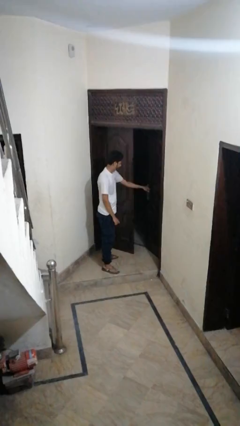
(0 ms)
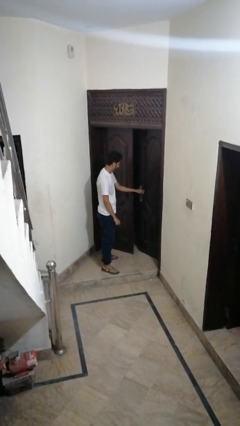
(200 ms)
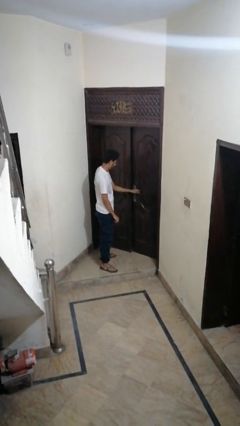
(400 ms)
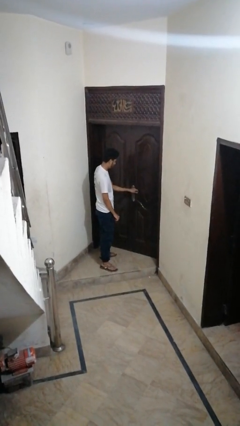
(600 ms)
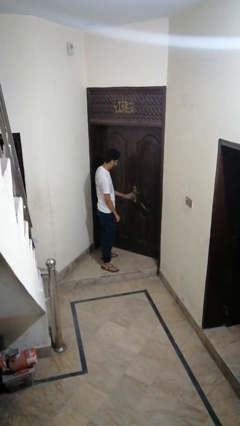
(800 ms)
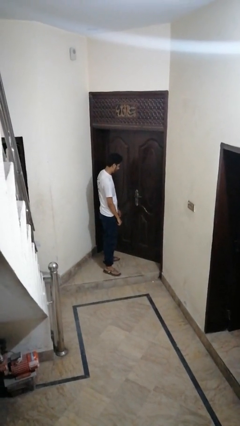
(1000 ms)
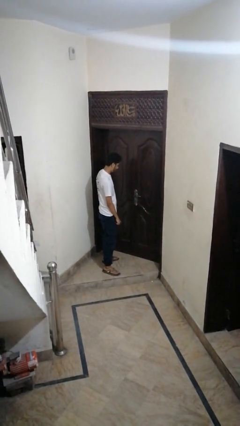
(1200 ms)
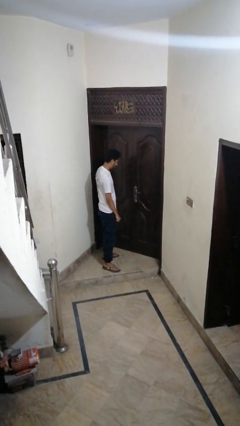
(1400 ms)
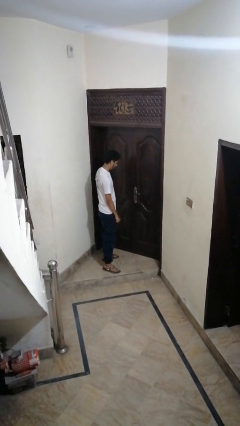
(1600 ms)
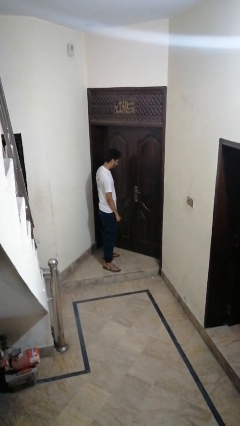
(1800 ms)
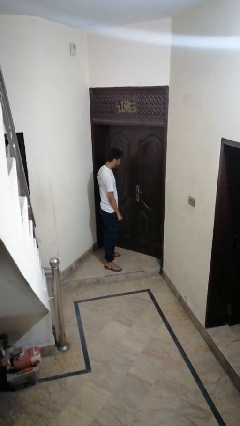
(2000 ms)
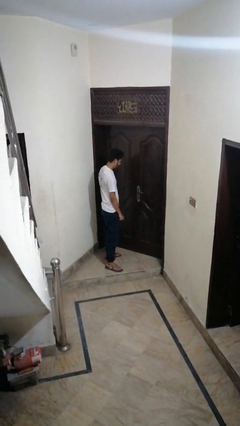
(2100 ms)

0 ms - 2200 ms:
person closes facility door

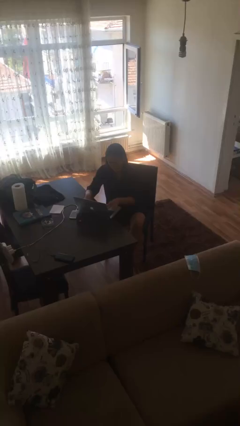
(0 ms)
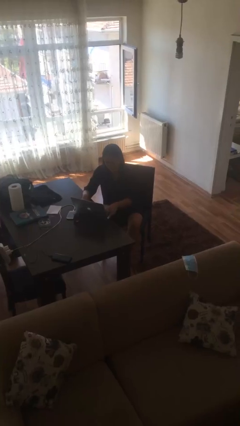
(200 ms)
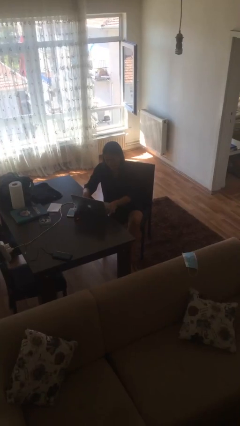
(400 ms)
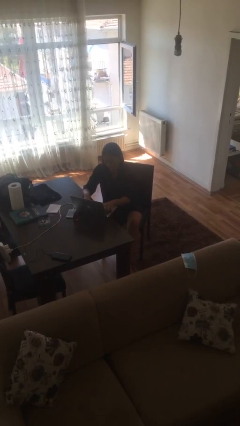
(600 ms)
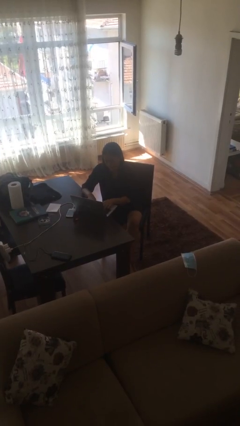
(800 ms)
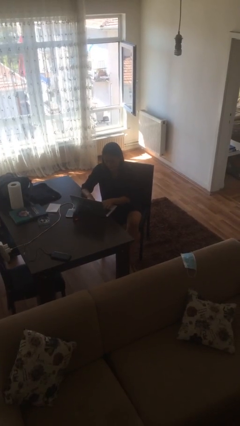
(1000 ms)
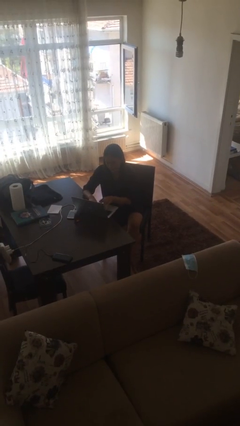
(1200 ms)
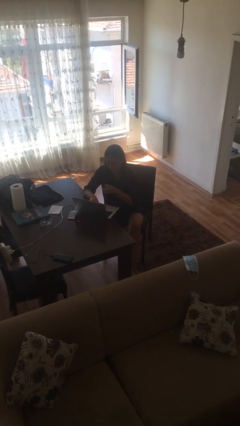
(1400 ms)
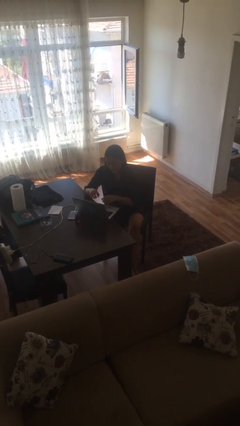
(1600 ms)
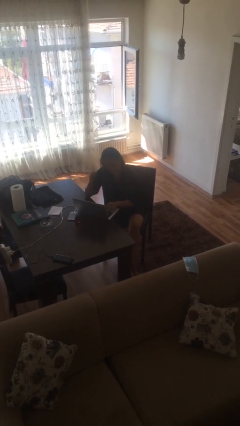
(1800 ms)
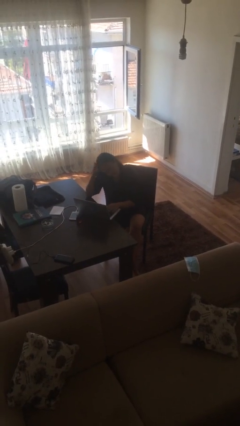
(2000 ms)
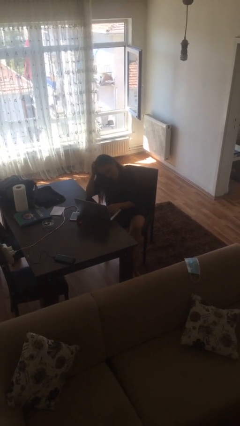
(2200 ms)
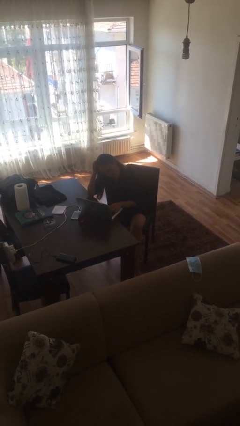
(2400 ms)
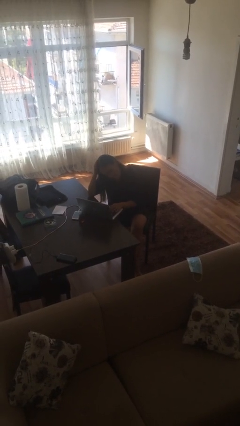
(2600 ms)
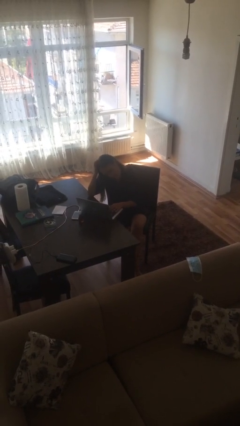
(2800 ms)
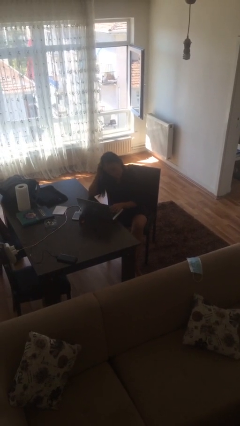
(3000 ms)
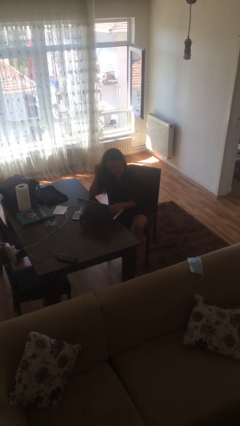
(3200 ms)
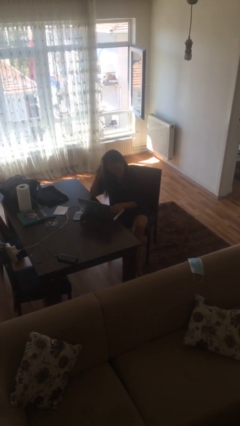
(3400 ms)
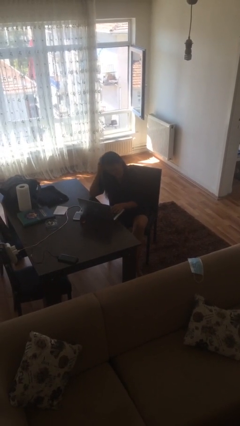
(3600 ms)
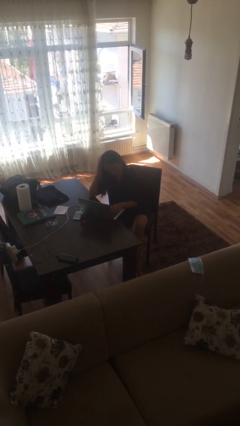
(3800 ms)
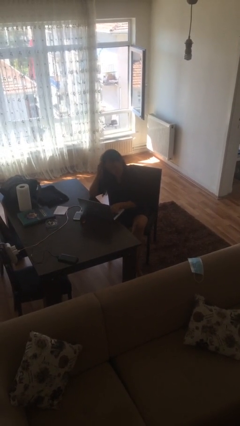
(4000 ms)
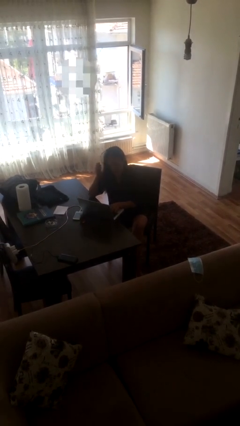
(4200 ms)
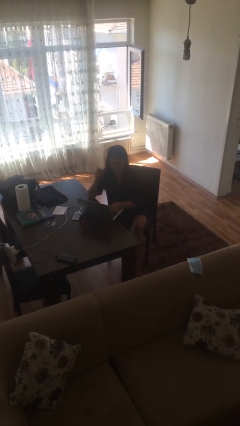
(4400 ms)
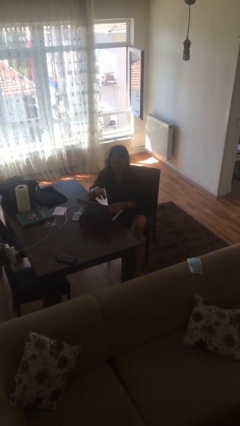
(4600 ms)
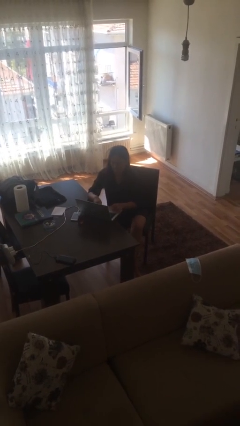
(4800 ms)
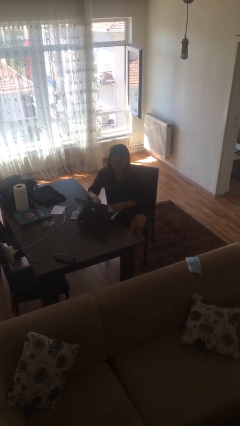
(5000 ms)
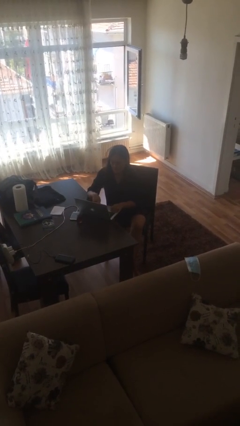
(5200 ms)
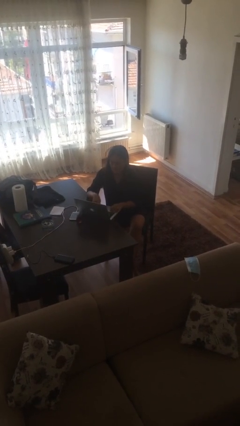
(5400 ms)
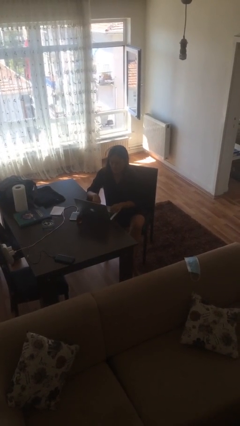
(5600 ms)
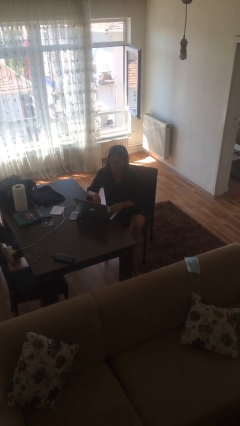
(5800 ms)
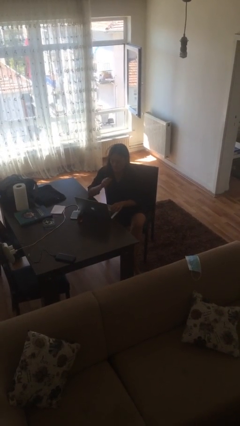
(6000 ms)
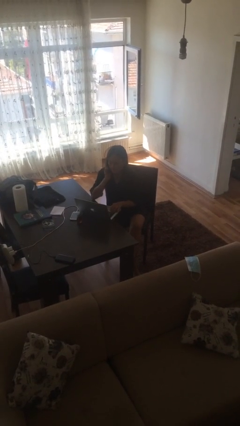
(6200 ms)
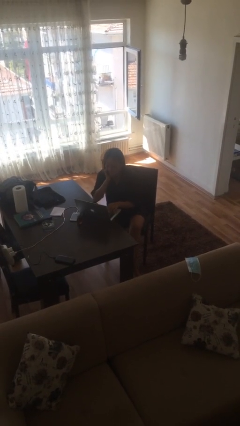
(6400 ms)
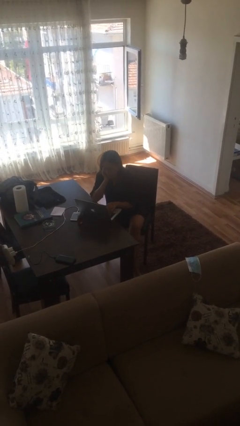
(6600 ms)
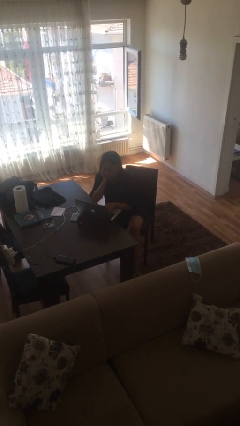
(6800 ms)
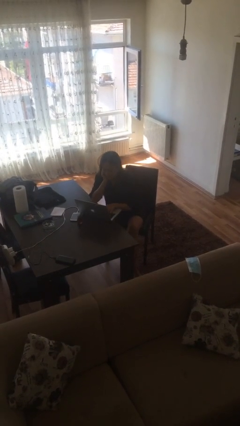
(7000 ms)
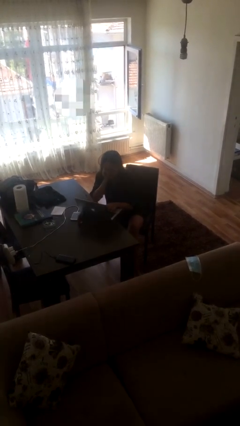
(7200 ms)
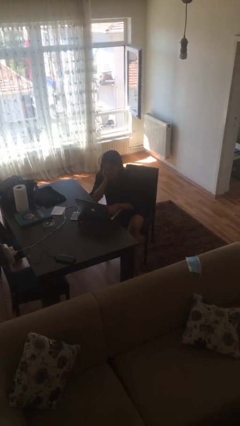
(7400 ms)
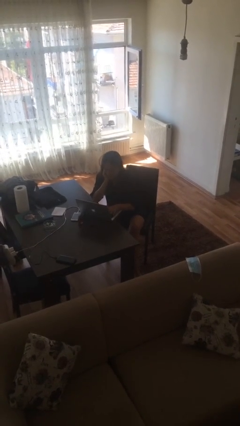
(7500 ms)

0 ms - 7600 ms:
person interacts with laptop

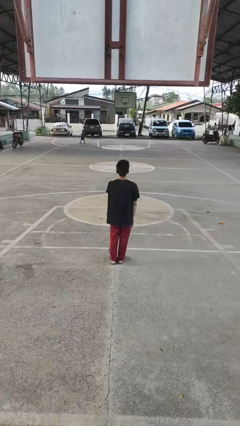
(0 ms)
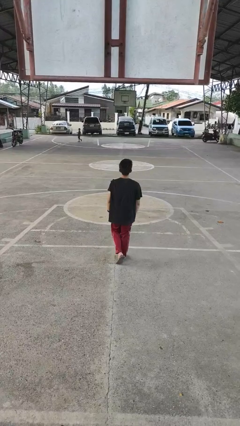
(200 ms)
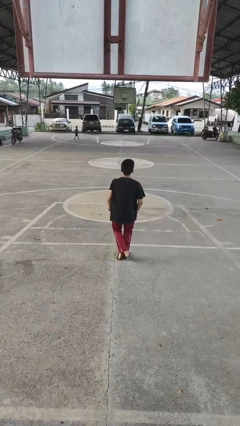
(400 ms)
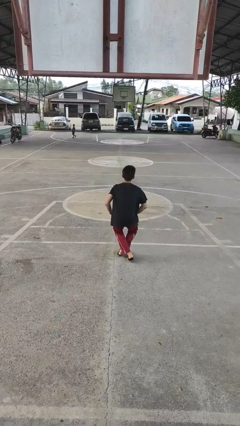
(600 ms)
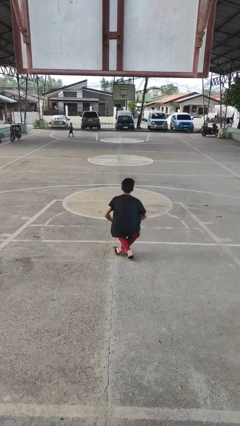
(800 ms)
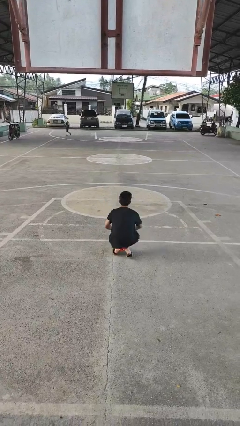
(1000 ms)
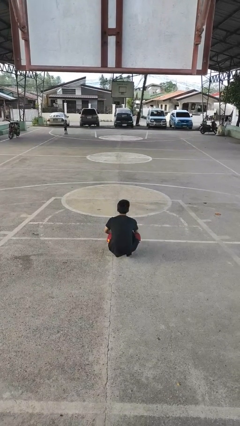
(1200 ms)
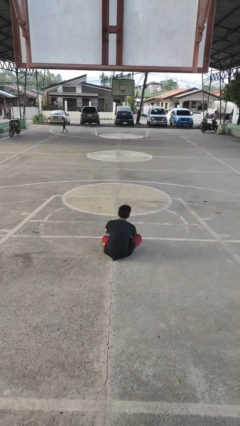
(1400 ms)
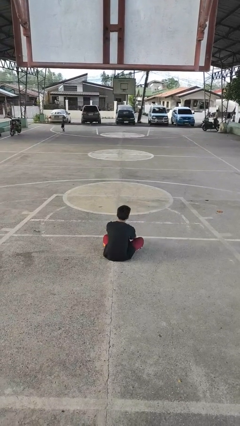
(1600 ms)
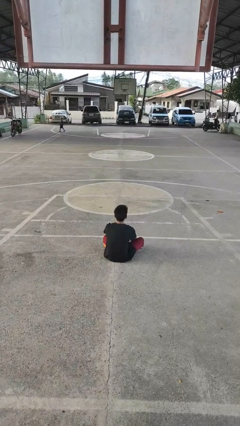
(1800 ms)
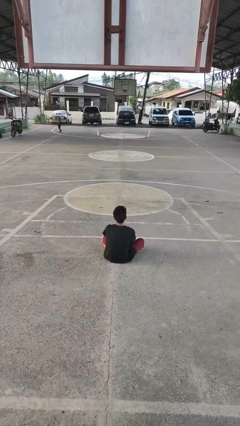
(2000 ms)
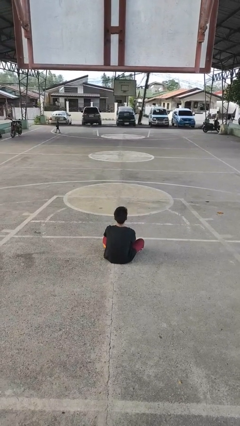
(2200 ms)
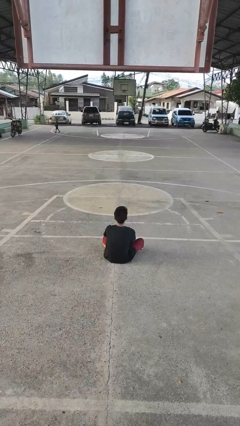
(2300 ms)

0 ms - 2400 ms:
person sits crisscross

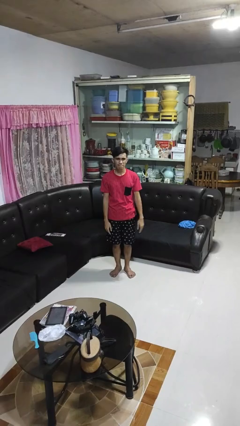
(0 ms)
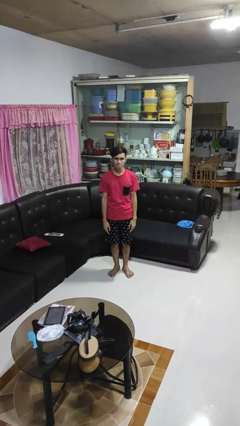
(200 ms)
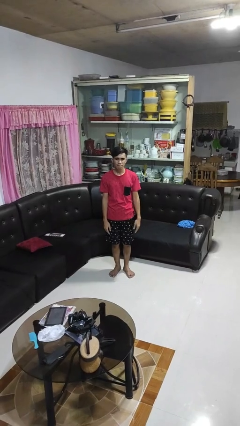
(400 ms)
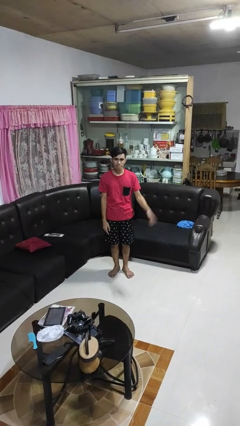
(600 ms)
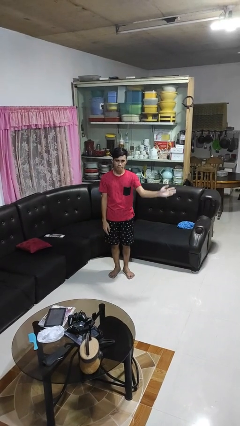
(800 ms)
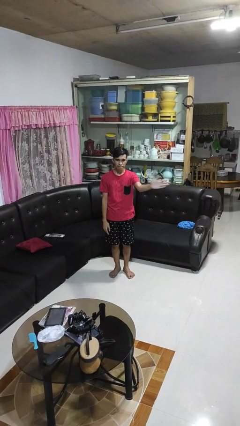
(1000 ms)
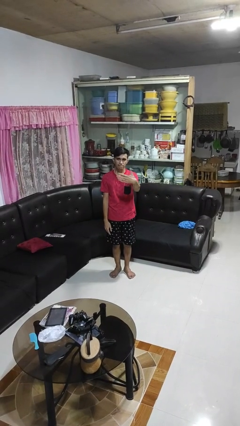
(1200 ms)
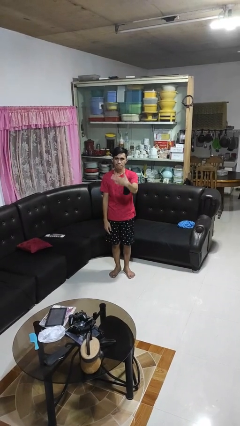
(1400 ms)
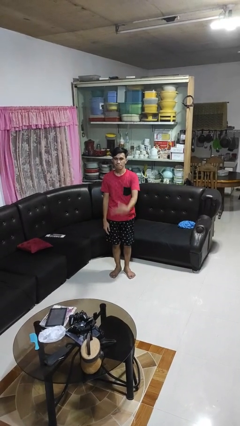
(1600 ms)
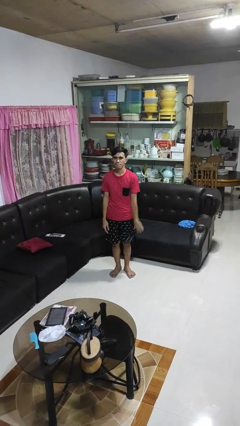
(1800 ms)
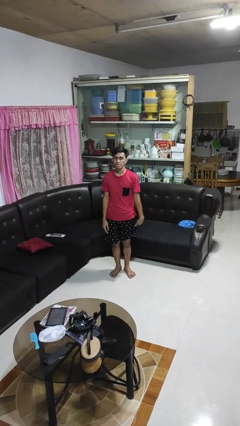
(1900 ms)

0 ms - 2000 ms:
person gestures swipe right

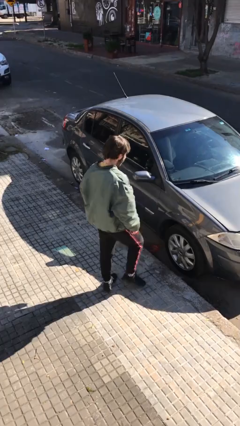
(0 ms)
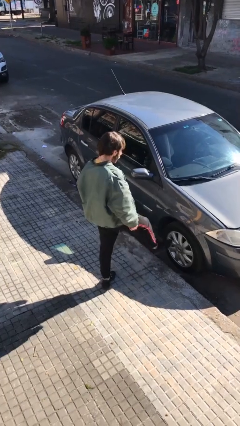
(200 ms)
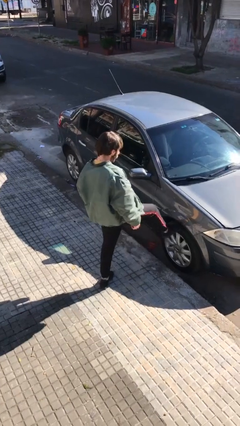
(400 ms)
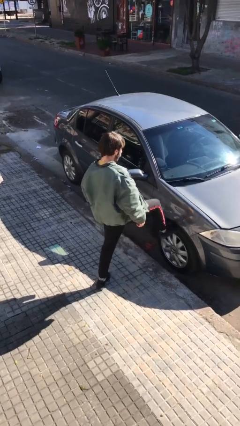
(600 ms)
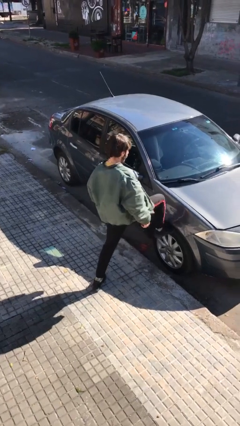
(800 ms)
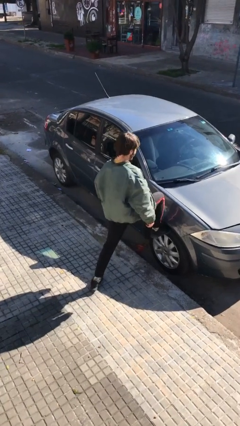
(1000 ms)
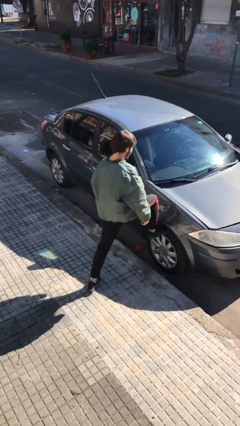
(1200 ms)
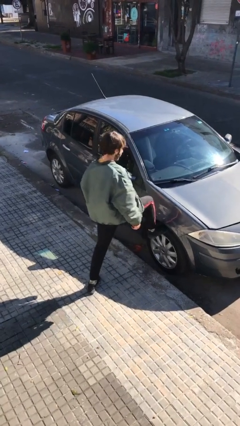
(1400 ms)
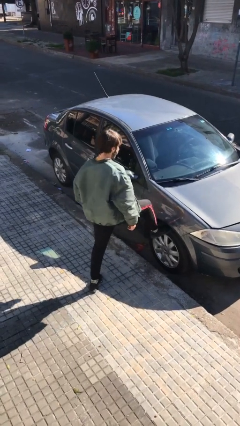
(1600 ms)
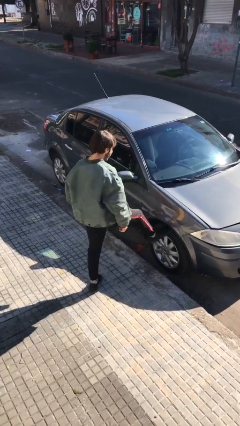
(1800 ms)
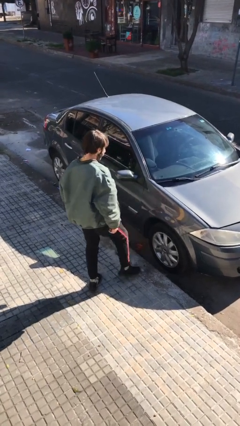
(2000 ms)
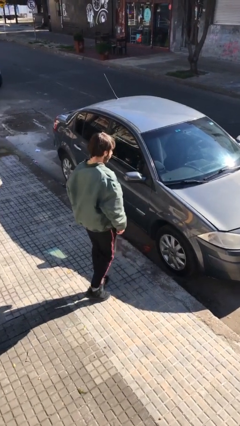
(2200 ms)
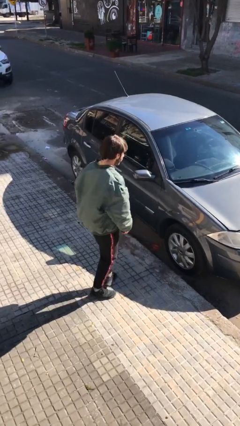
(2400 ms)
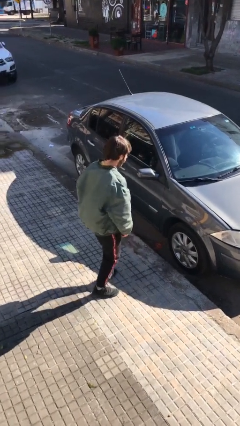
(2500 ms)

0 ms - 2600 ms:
person kicks car tires

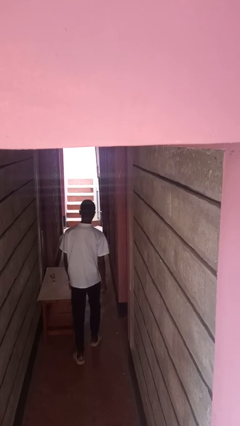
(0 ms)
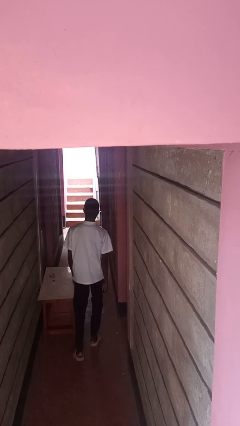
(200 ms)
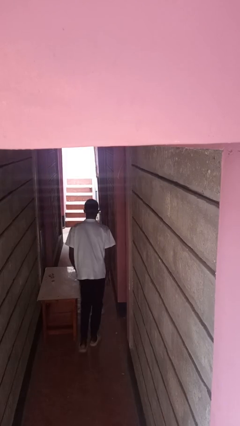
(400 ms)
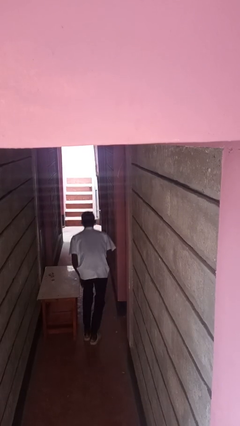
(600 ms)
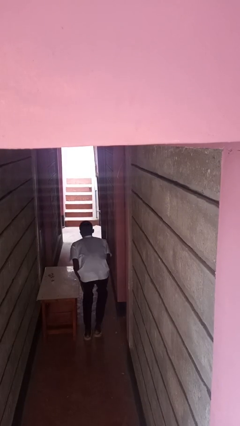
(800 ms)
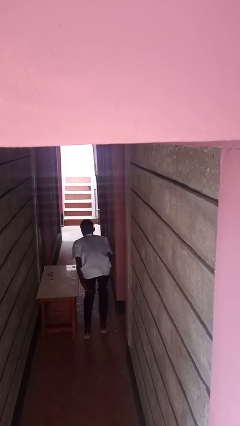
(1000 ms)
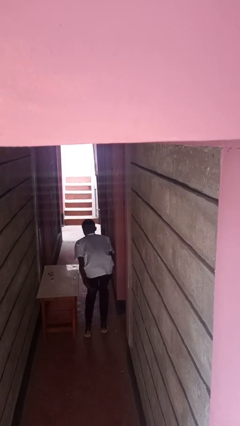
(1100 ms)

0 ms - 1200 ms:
person bumps into table
